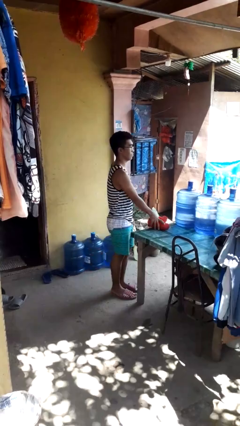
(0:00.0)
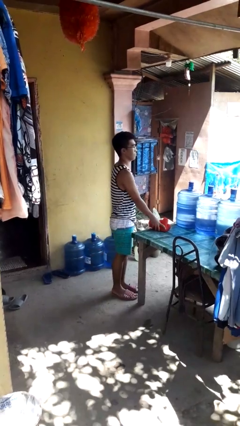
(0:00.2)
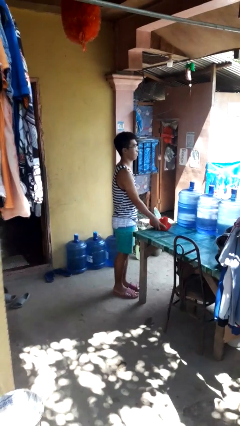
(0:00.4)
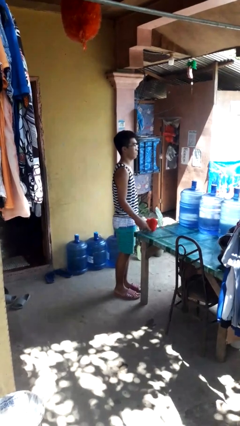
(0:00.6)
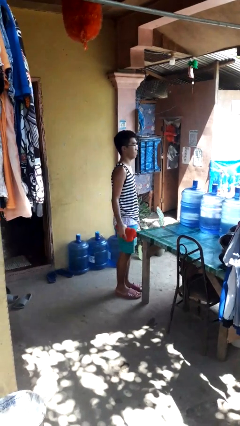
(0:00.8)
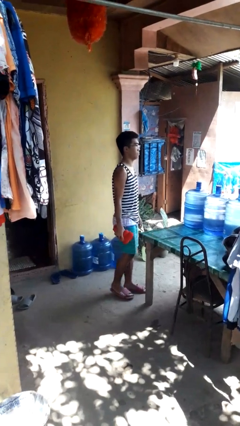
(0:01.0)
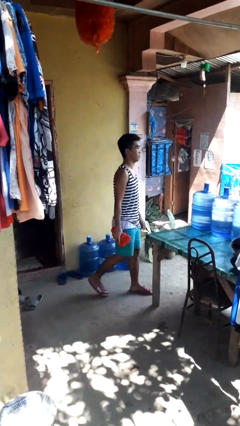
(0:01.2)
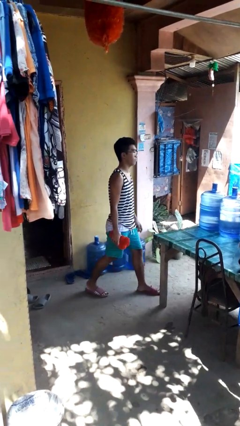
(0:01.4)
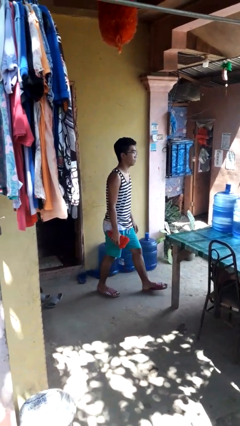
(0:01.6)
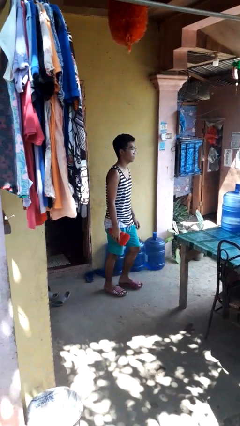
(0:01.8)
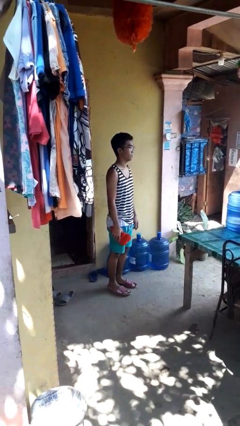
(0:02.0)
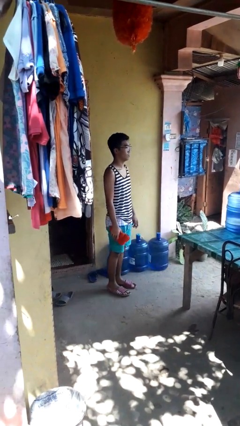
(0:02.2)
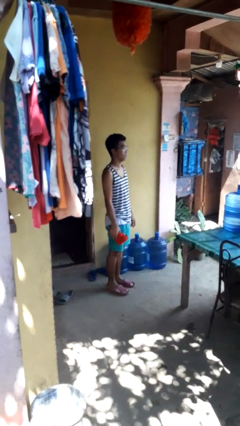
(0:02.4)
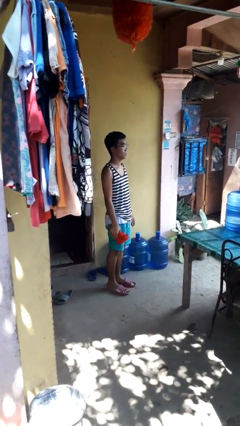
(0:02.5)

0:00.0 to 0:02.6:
person picks up object from table

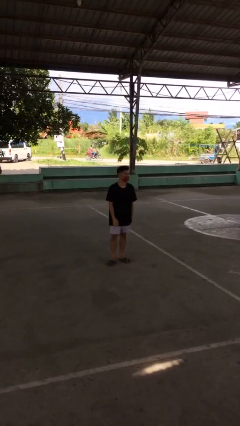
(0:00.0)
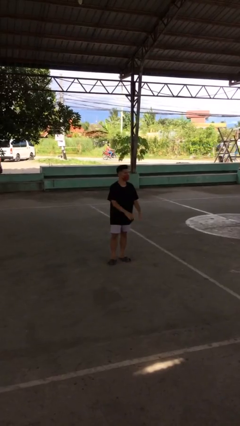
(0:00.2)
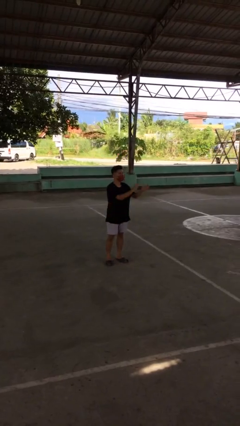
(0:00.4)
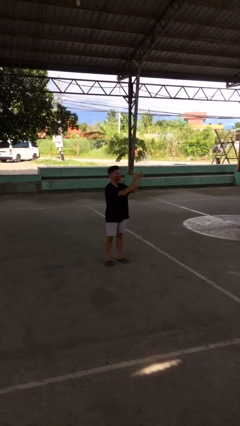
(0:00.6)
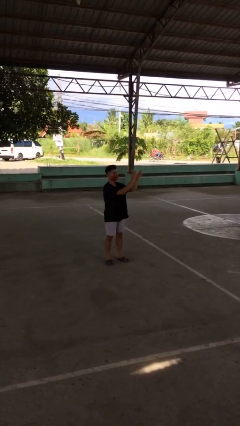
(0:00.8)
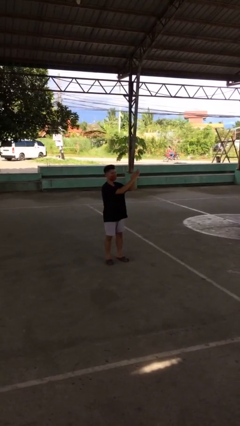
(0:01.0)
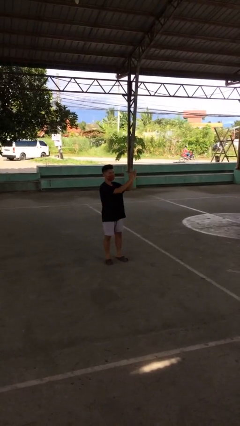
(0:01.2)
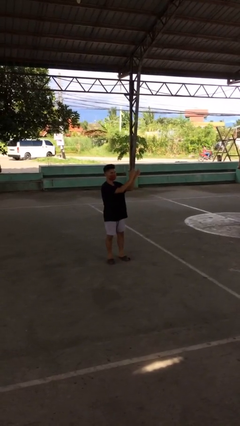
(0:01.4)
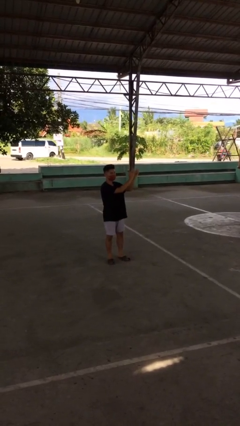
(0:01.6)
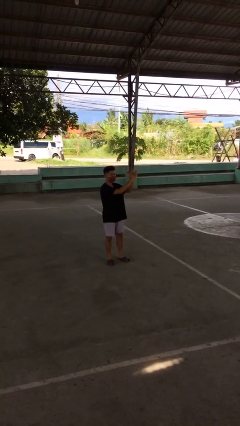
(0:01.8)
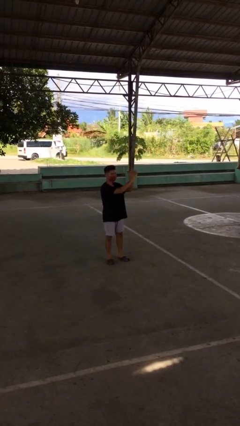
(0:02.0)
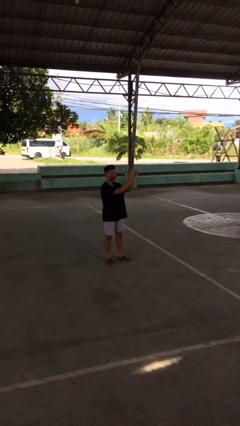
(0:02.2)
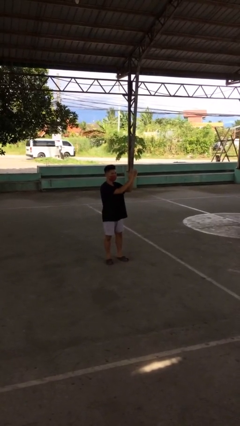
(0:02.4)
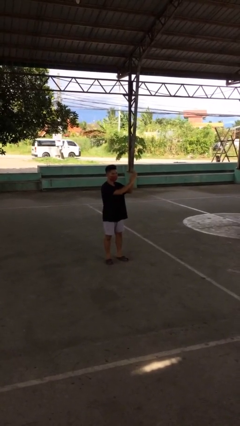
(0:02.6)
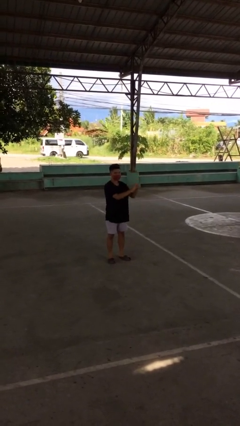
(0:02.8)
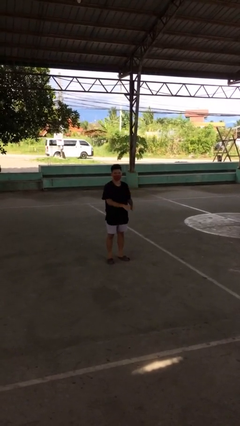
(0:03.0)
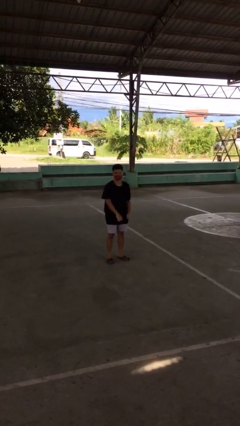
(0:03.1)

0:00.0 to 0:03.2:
person claps hands

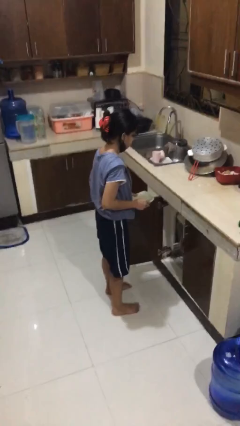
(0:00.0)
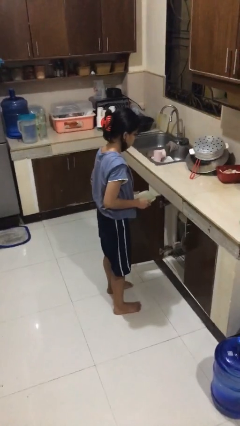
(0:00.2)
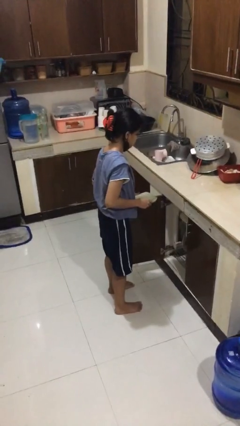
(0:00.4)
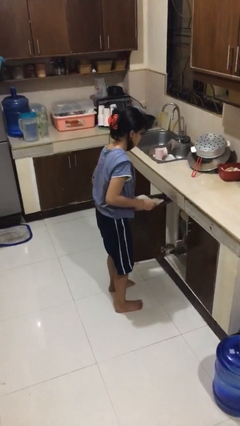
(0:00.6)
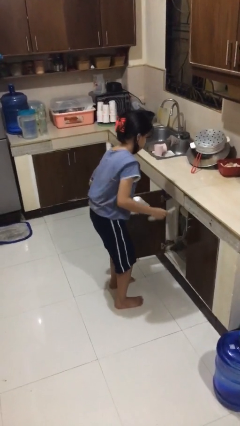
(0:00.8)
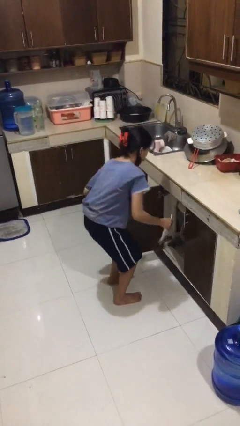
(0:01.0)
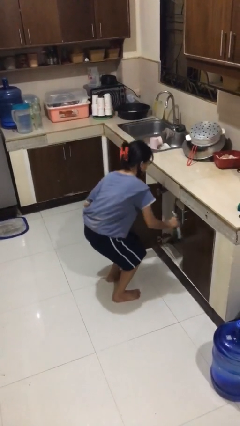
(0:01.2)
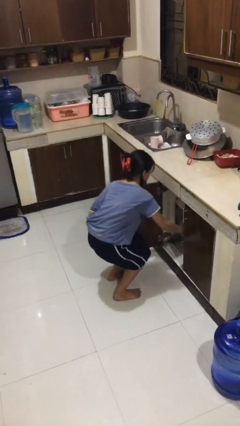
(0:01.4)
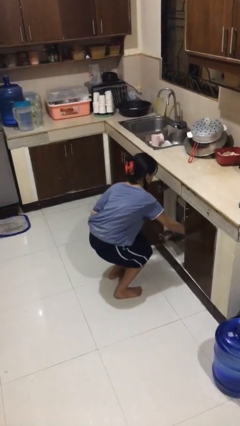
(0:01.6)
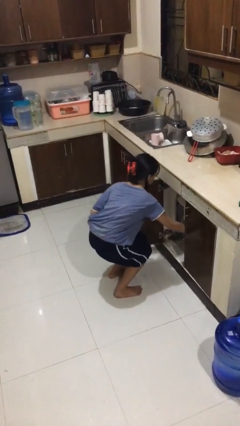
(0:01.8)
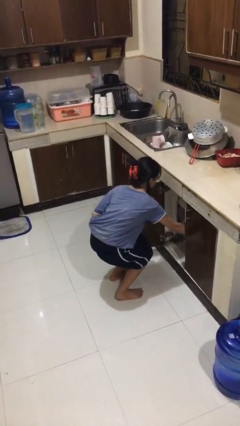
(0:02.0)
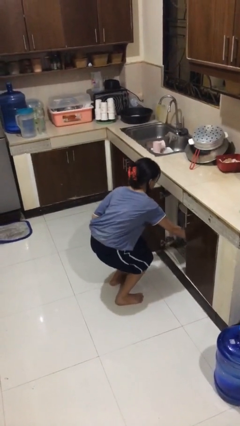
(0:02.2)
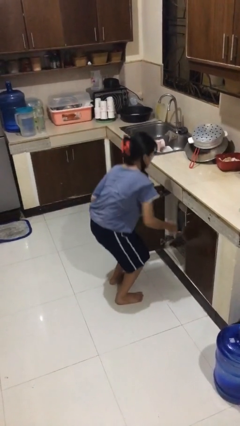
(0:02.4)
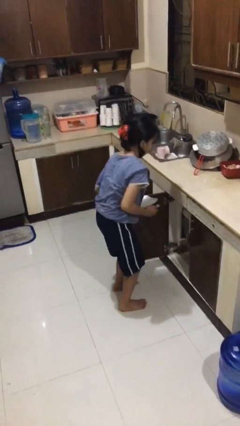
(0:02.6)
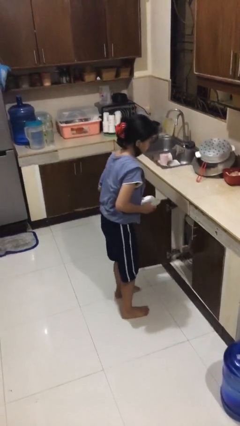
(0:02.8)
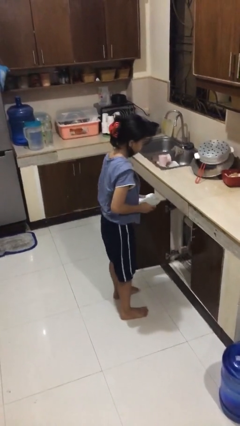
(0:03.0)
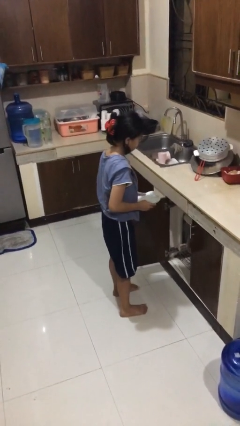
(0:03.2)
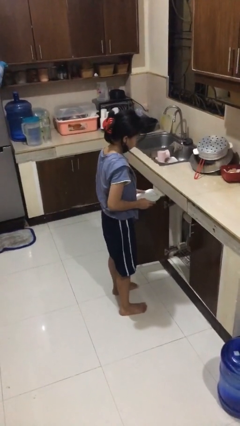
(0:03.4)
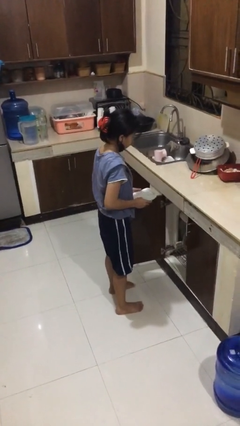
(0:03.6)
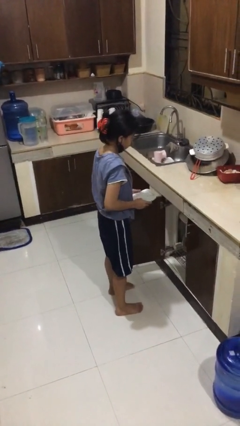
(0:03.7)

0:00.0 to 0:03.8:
person loads dishwasher

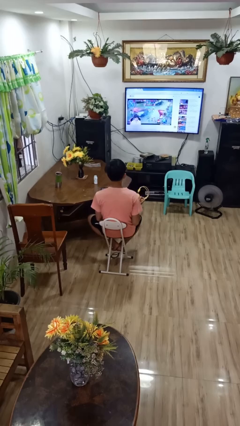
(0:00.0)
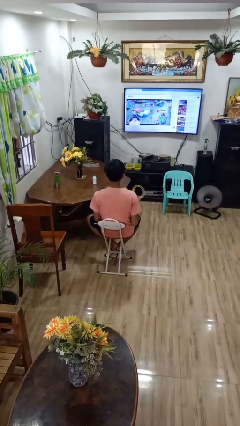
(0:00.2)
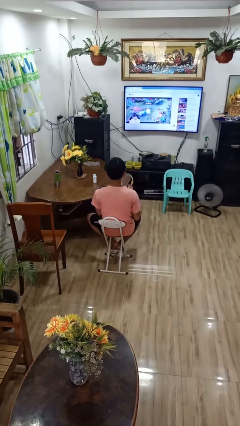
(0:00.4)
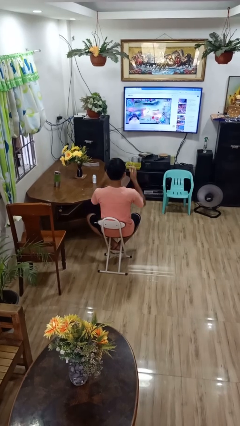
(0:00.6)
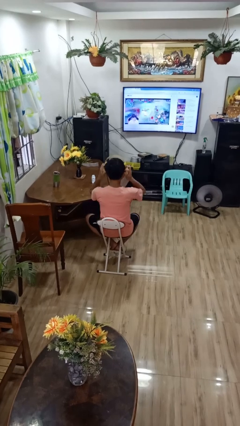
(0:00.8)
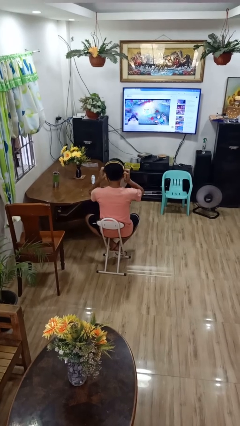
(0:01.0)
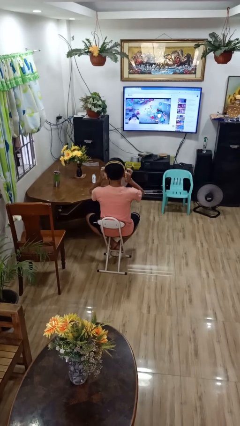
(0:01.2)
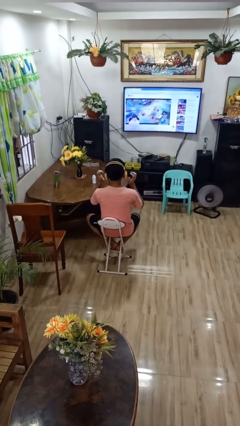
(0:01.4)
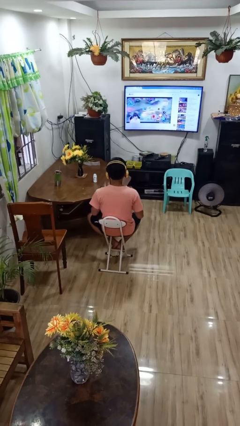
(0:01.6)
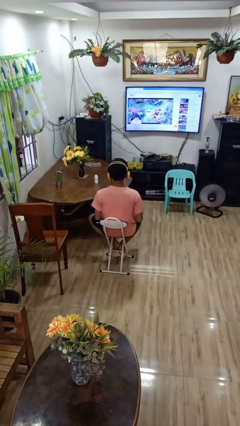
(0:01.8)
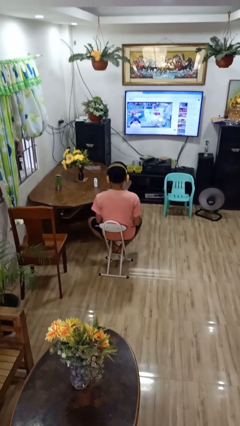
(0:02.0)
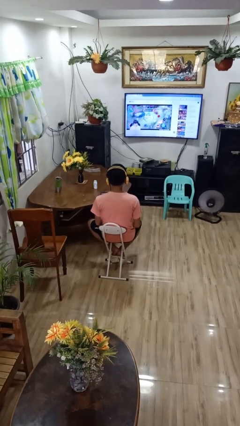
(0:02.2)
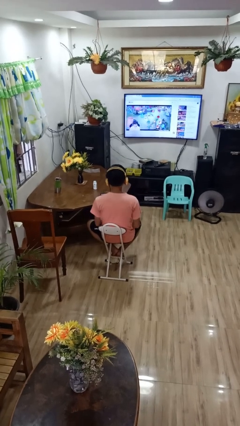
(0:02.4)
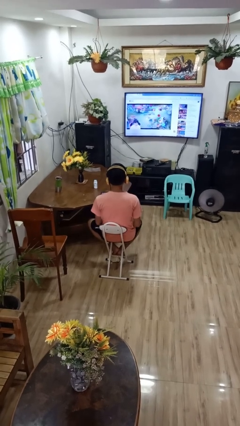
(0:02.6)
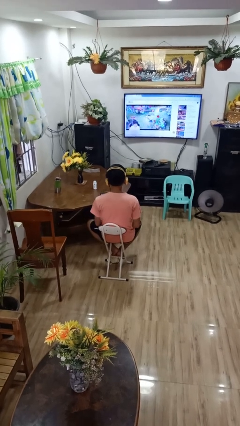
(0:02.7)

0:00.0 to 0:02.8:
person puts on headphones

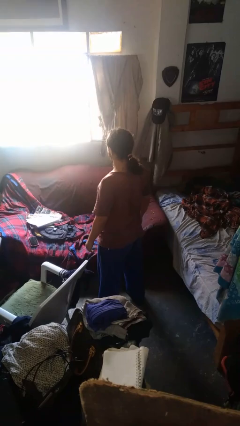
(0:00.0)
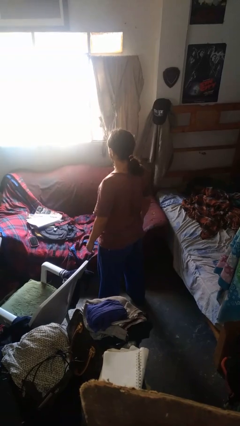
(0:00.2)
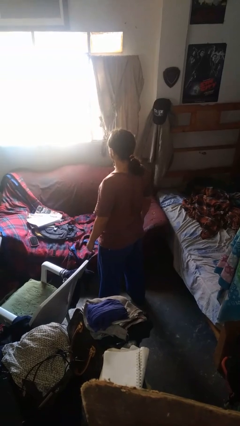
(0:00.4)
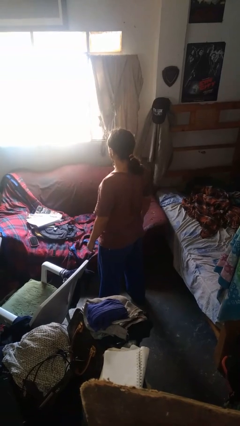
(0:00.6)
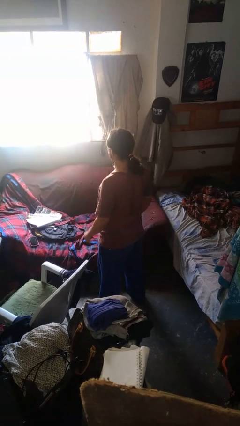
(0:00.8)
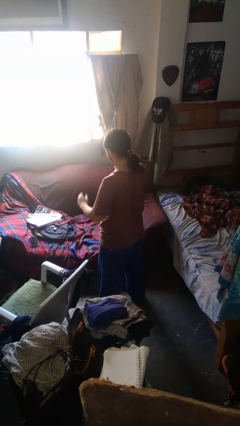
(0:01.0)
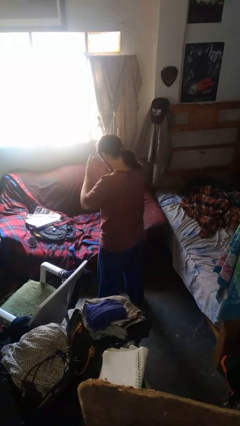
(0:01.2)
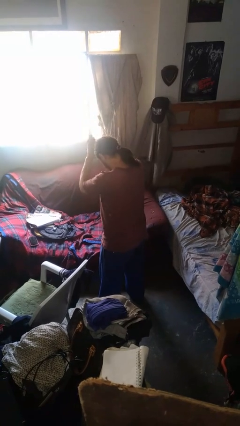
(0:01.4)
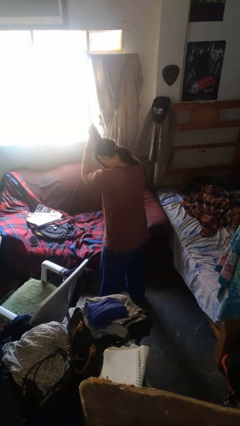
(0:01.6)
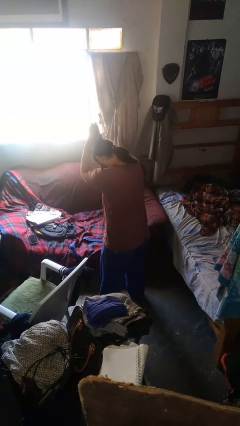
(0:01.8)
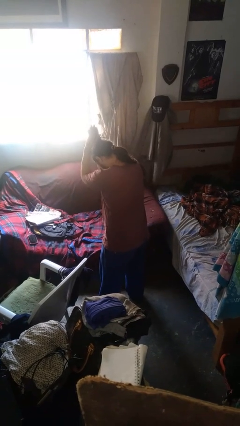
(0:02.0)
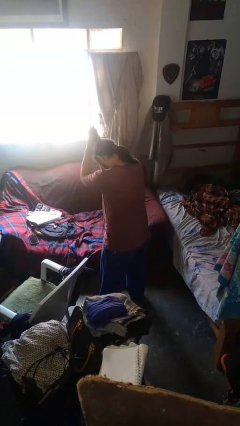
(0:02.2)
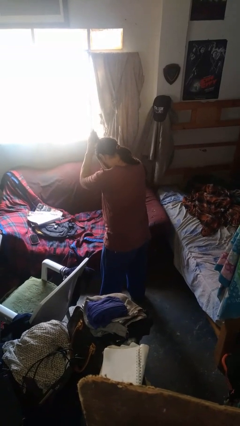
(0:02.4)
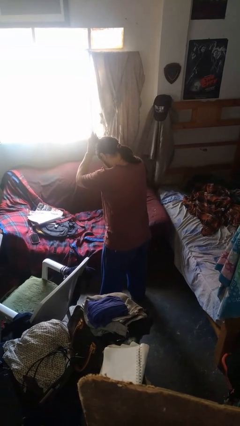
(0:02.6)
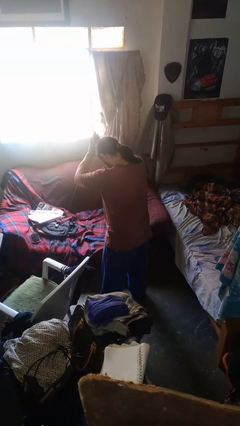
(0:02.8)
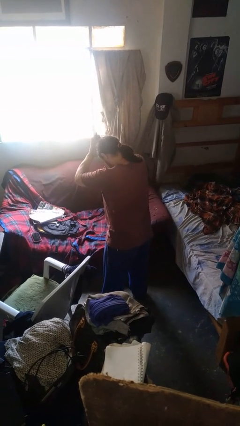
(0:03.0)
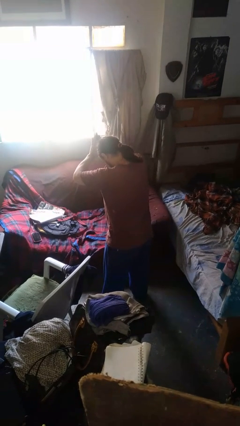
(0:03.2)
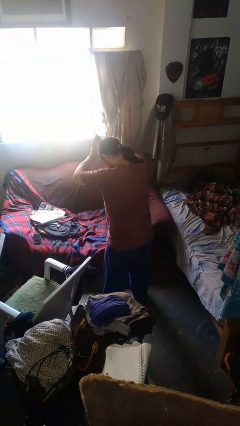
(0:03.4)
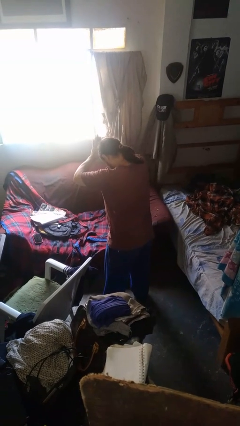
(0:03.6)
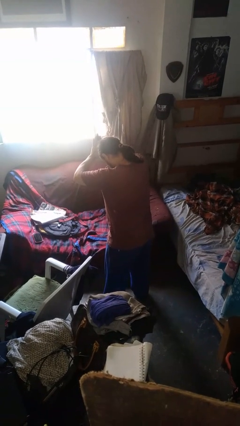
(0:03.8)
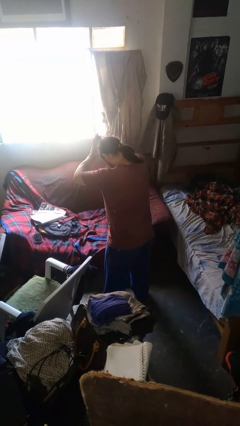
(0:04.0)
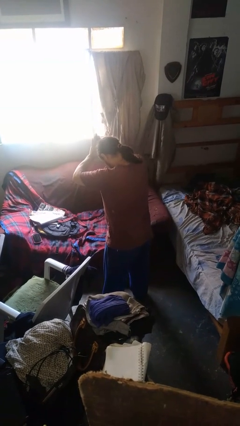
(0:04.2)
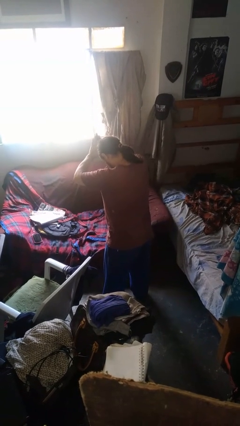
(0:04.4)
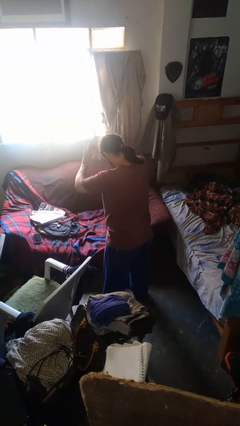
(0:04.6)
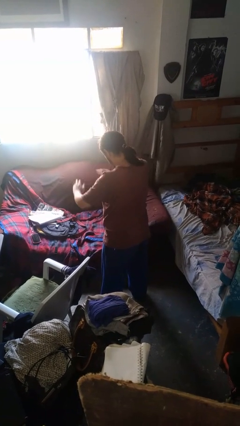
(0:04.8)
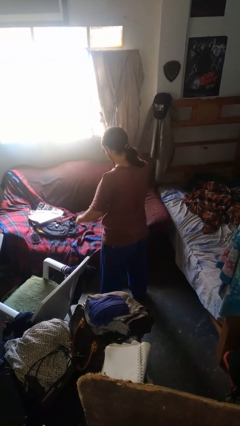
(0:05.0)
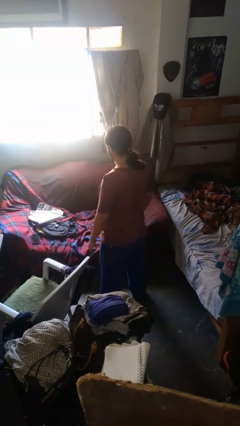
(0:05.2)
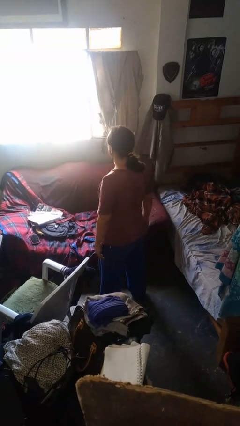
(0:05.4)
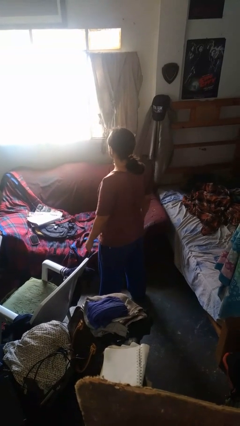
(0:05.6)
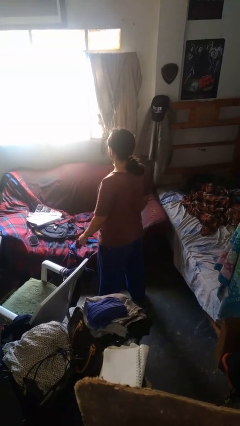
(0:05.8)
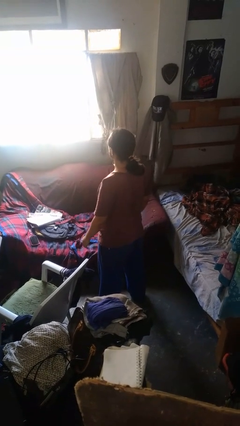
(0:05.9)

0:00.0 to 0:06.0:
person prays
